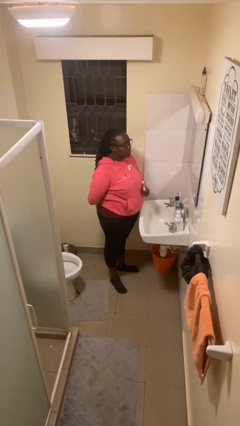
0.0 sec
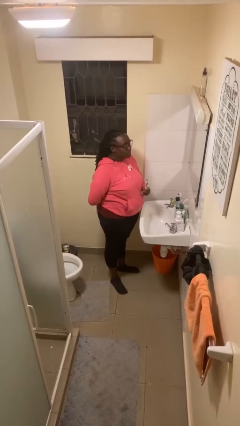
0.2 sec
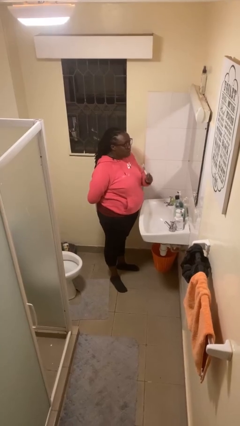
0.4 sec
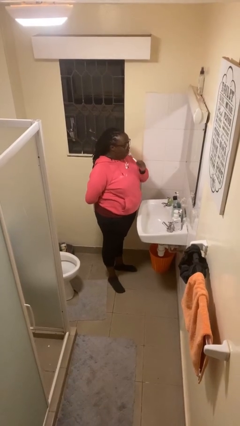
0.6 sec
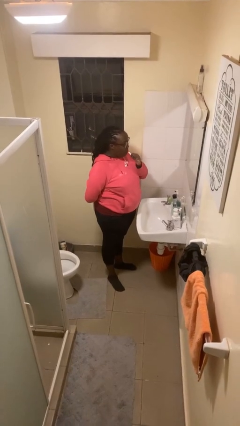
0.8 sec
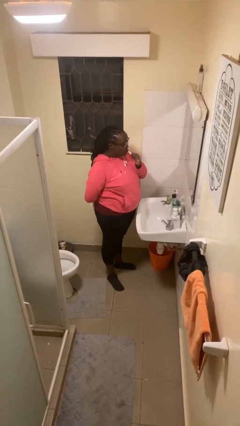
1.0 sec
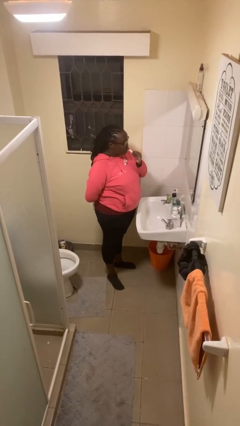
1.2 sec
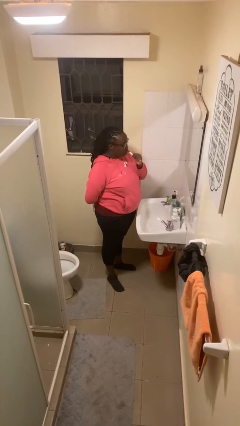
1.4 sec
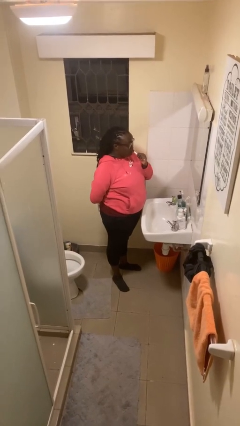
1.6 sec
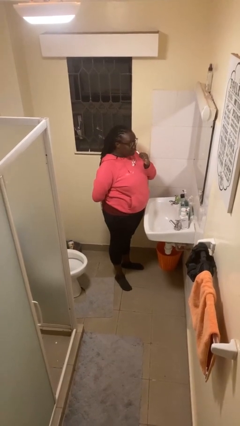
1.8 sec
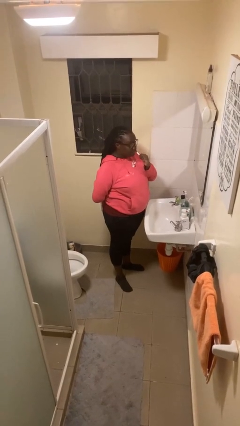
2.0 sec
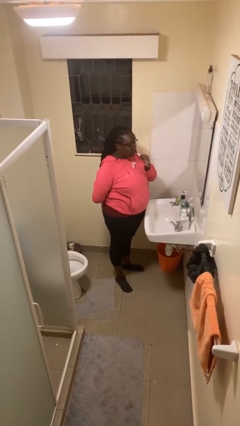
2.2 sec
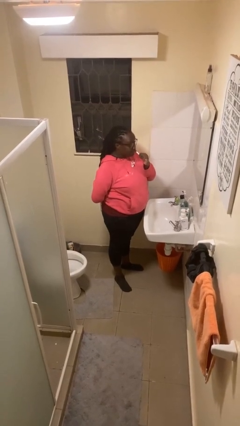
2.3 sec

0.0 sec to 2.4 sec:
person brushes teeth

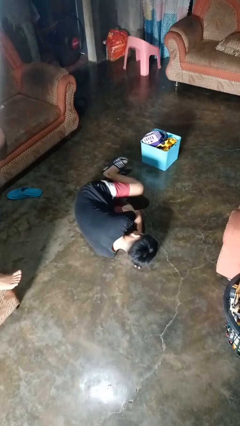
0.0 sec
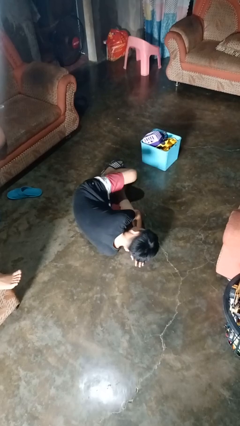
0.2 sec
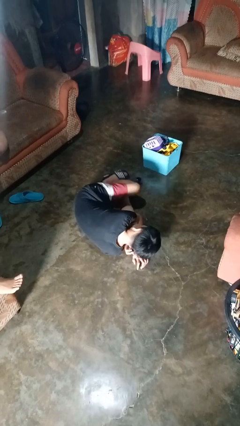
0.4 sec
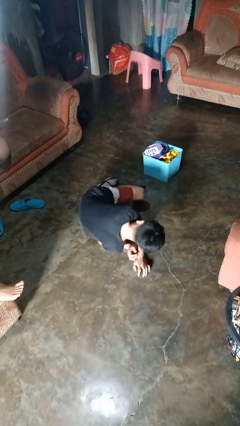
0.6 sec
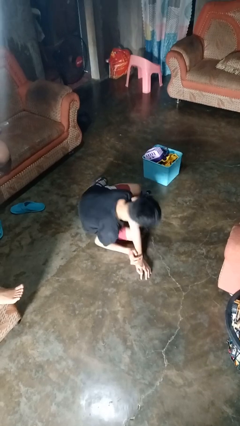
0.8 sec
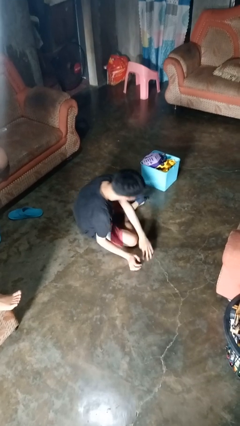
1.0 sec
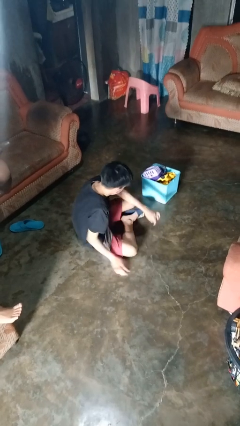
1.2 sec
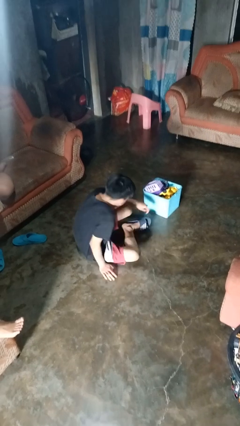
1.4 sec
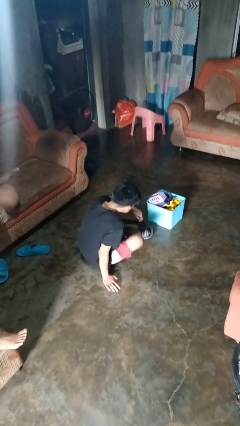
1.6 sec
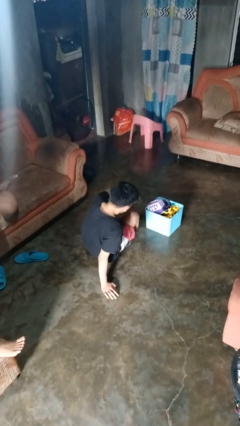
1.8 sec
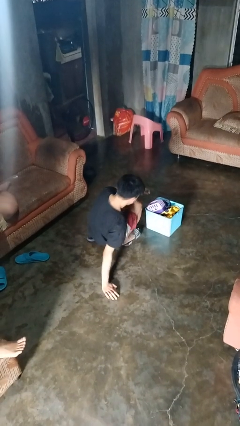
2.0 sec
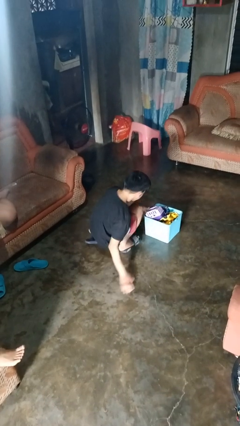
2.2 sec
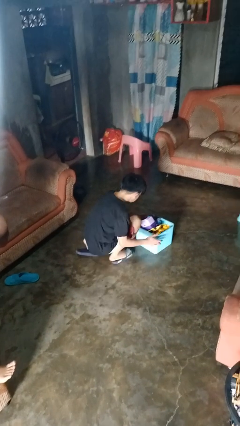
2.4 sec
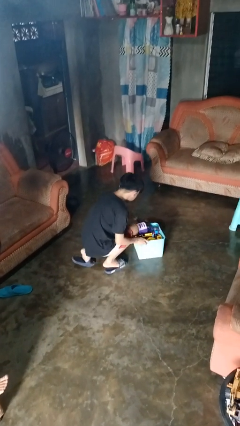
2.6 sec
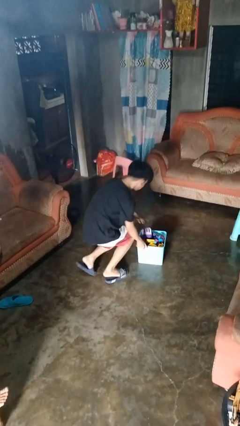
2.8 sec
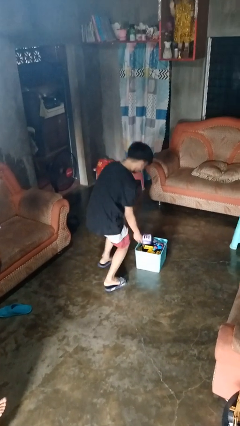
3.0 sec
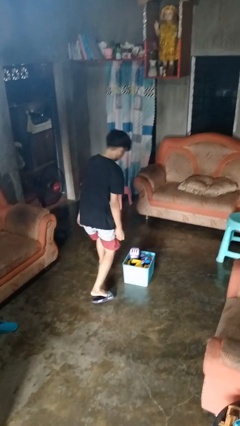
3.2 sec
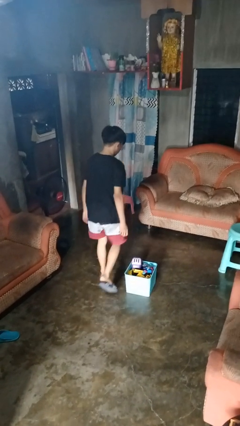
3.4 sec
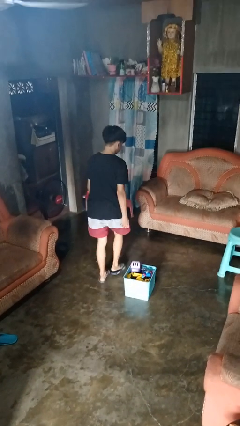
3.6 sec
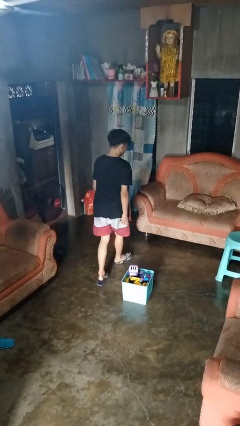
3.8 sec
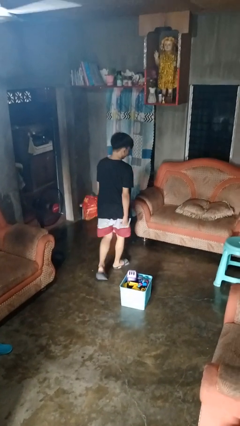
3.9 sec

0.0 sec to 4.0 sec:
person stands up from floor

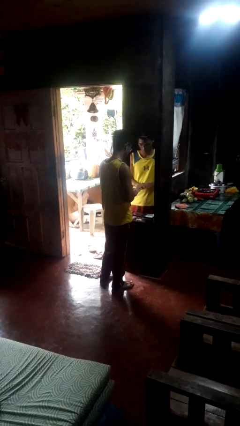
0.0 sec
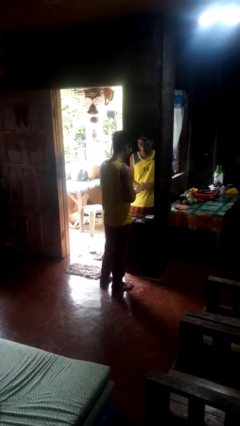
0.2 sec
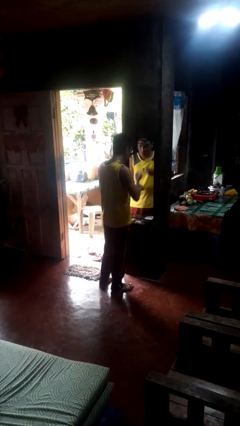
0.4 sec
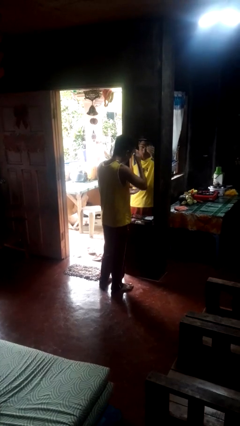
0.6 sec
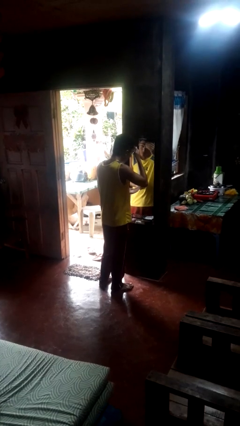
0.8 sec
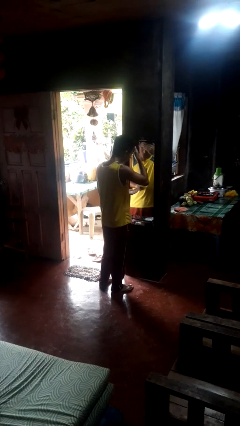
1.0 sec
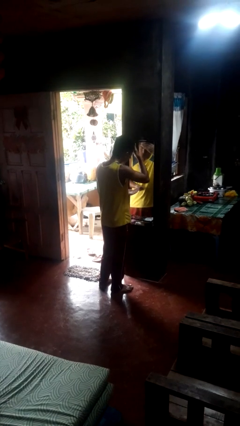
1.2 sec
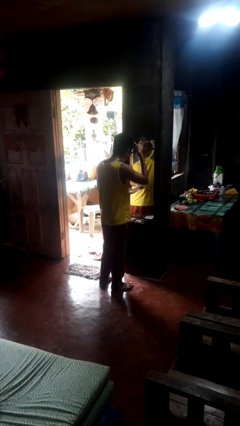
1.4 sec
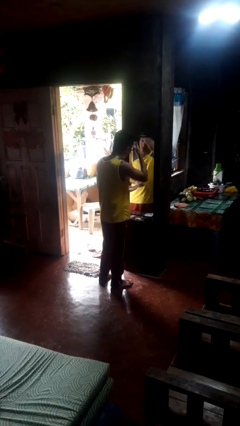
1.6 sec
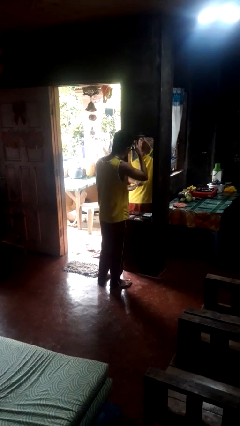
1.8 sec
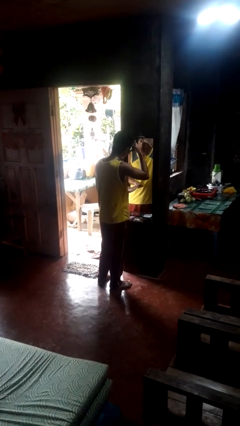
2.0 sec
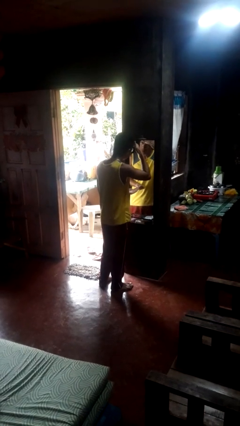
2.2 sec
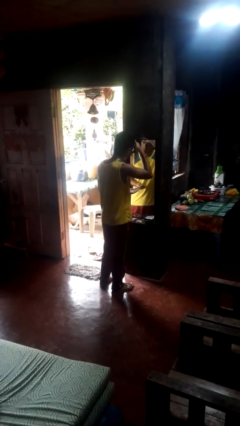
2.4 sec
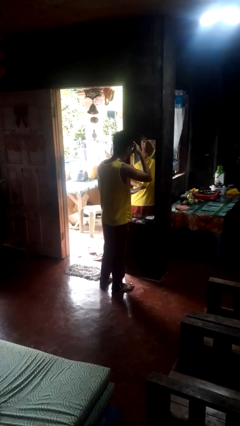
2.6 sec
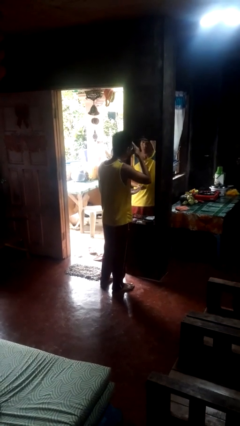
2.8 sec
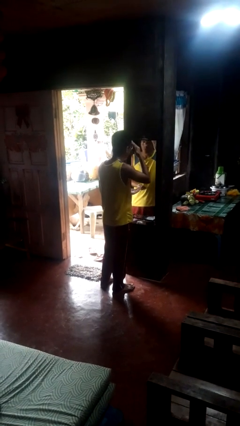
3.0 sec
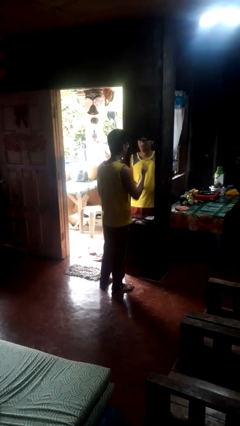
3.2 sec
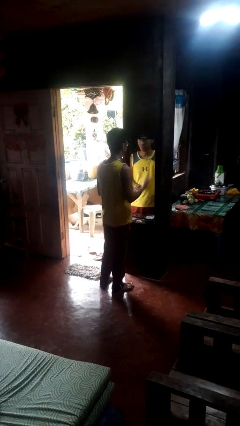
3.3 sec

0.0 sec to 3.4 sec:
person applies foundation makeup

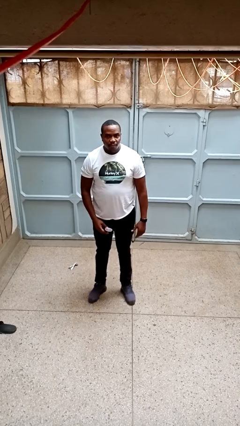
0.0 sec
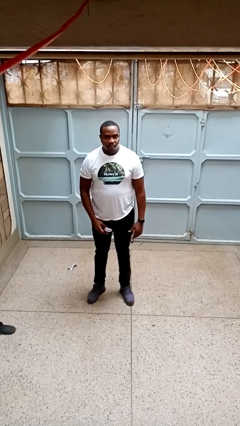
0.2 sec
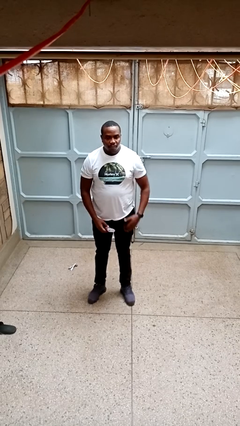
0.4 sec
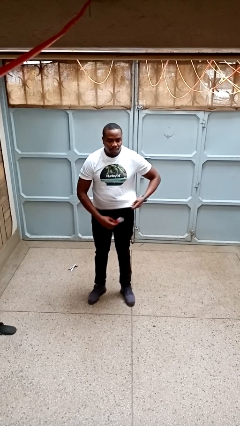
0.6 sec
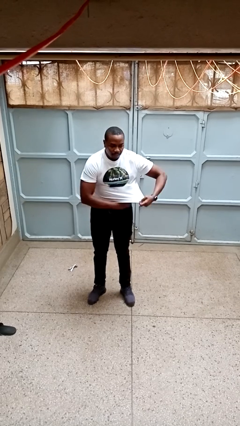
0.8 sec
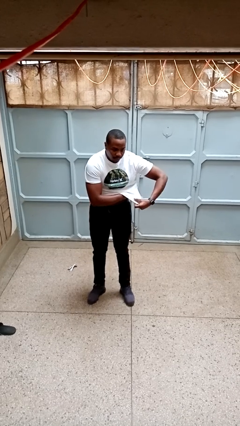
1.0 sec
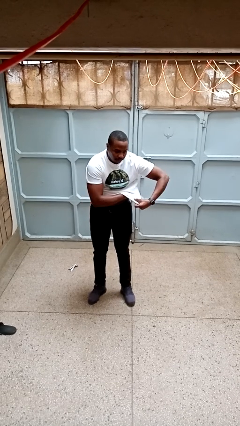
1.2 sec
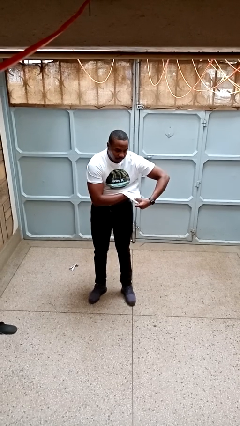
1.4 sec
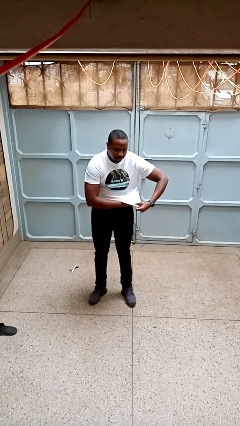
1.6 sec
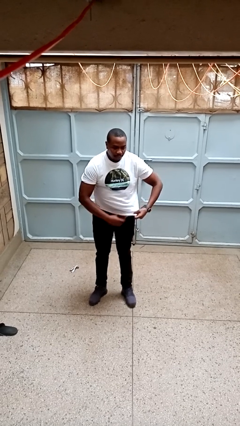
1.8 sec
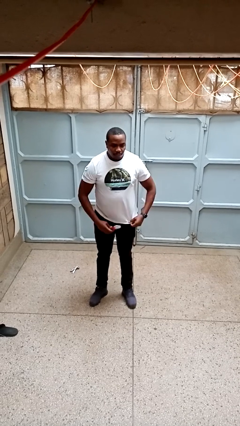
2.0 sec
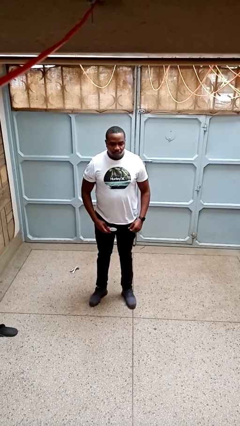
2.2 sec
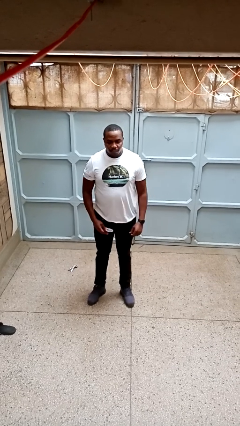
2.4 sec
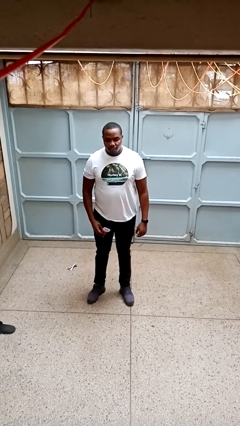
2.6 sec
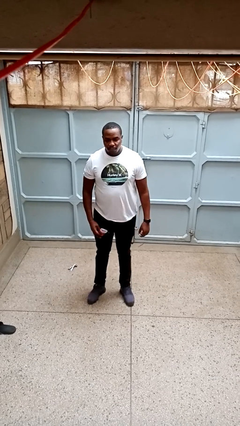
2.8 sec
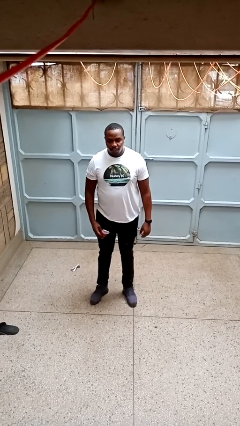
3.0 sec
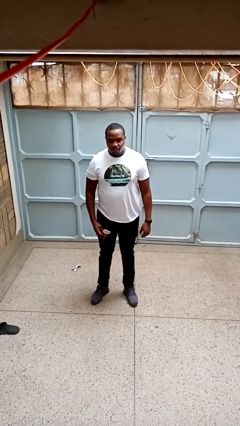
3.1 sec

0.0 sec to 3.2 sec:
person applies deodorant

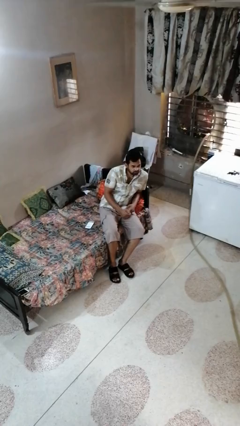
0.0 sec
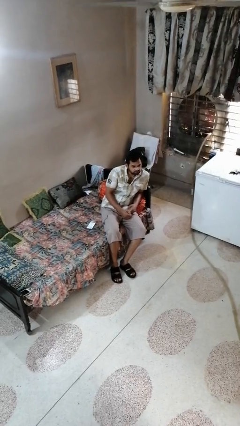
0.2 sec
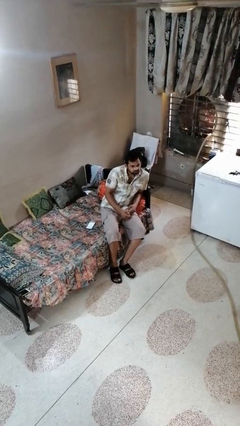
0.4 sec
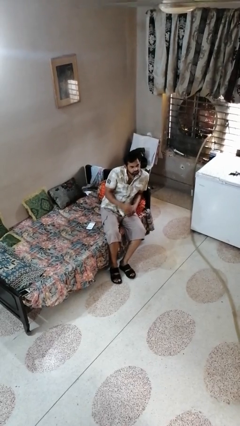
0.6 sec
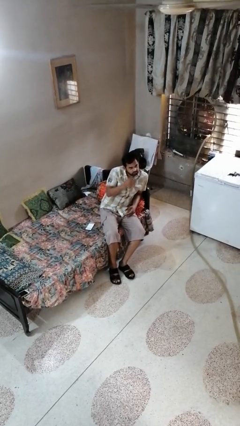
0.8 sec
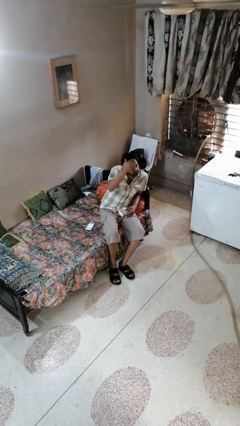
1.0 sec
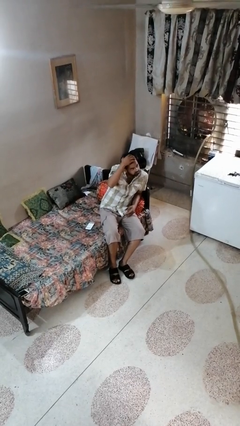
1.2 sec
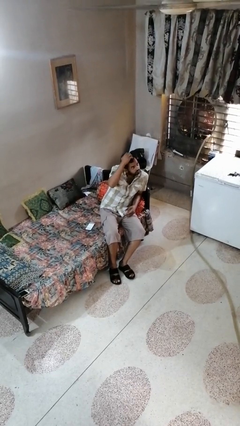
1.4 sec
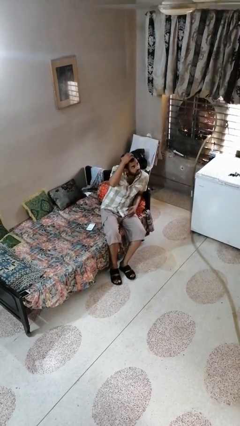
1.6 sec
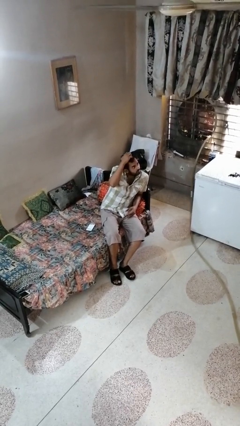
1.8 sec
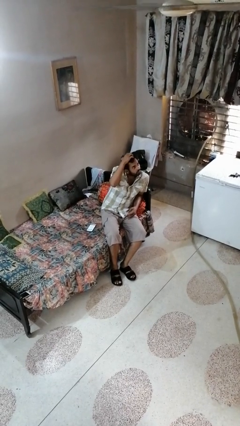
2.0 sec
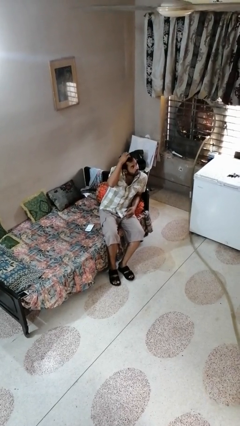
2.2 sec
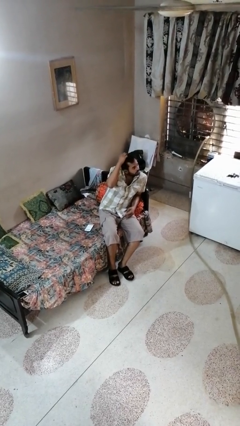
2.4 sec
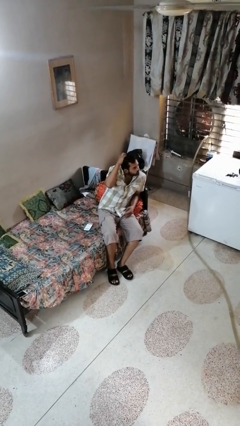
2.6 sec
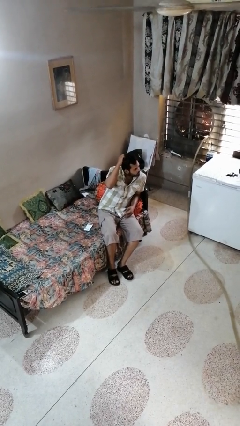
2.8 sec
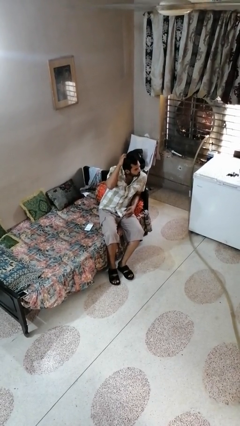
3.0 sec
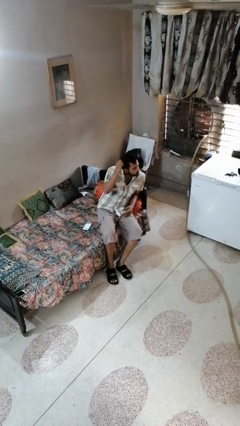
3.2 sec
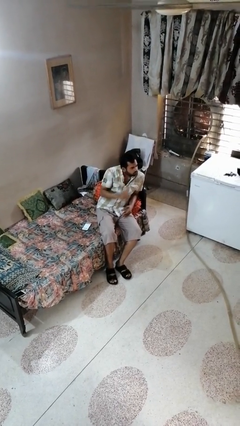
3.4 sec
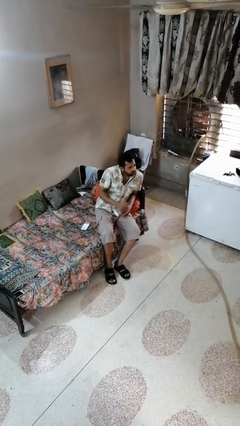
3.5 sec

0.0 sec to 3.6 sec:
person scratches face

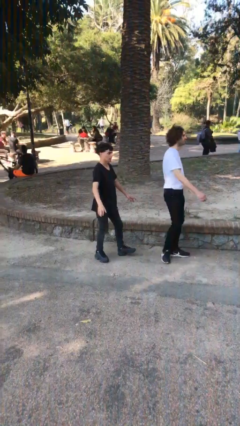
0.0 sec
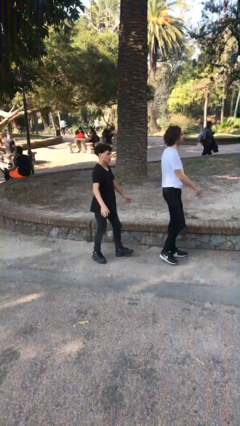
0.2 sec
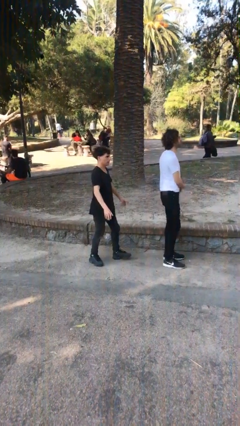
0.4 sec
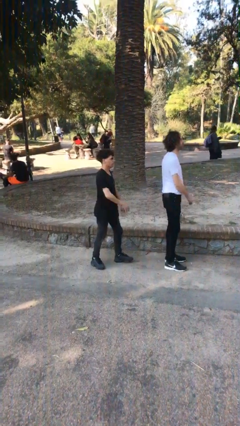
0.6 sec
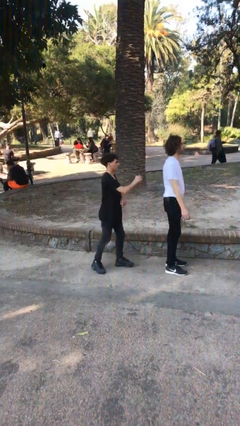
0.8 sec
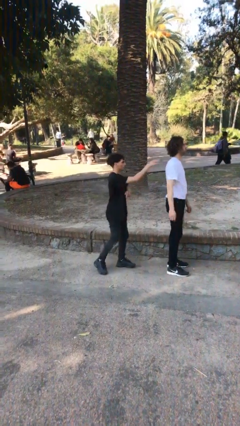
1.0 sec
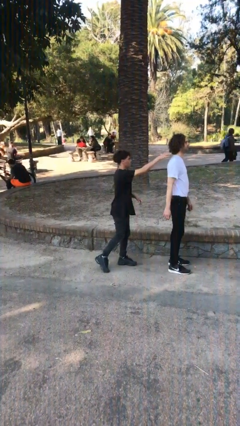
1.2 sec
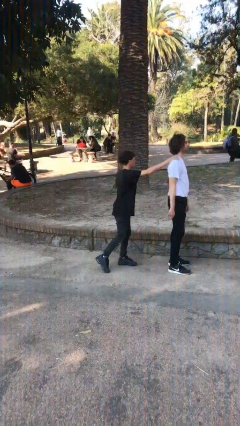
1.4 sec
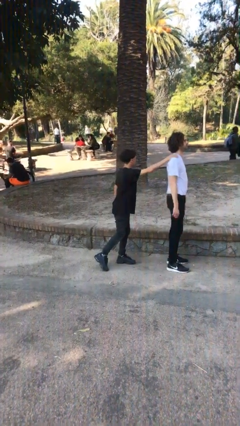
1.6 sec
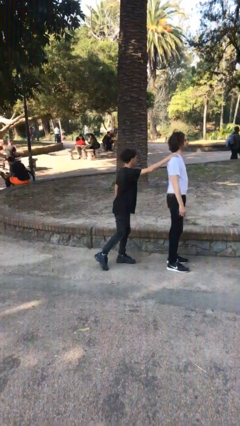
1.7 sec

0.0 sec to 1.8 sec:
person grabs person by shoulder
